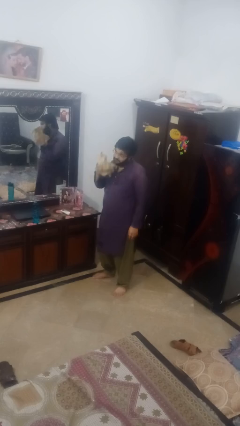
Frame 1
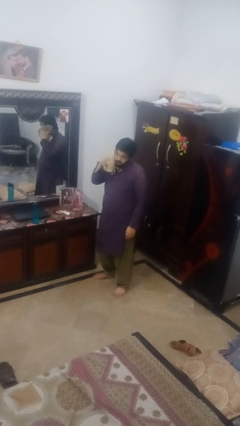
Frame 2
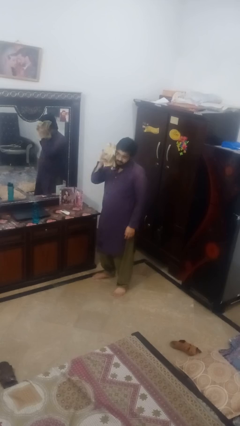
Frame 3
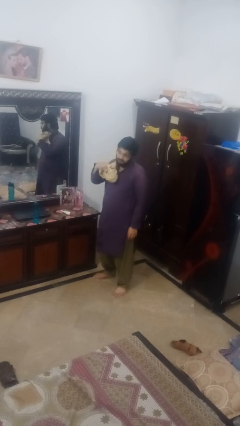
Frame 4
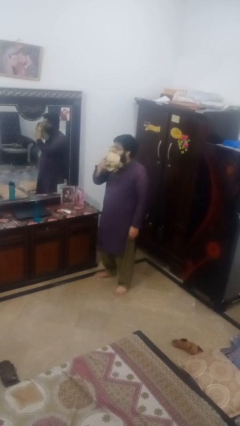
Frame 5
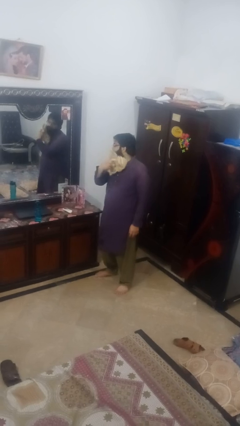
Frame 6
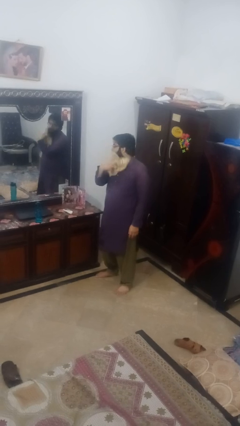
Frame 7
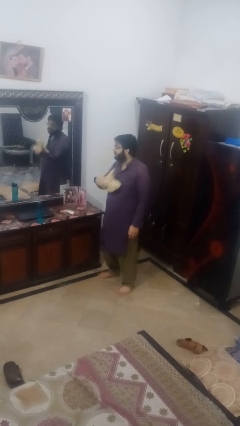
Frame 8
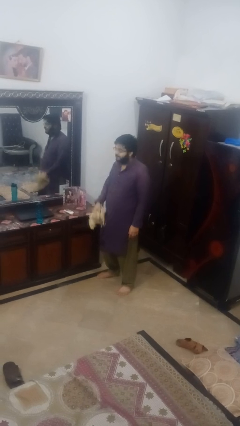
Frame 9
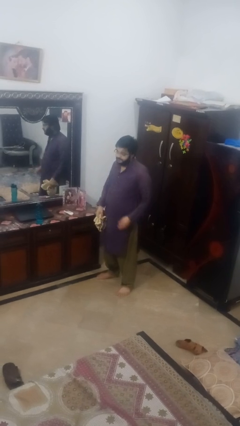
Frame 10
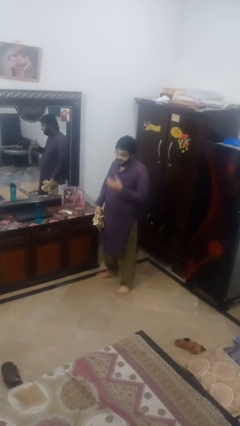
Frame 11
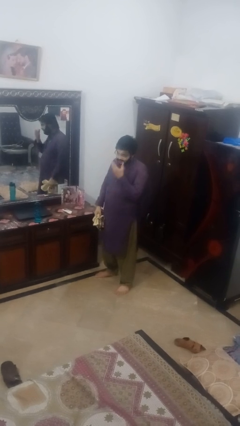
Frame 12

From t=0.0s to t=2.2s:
person wipes mouth with napkin

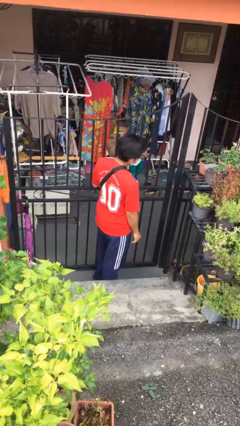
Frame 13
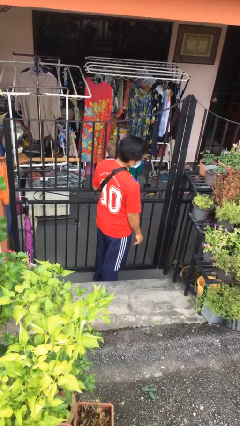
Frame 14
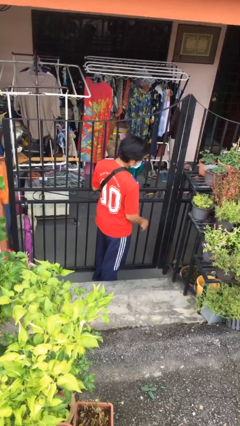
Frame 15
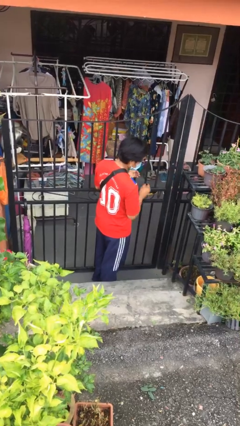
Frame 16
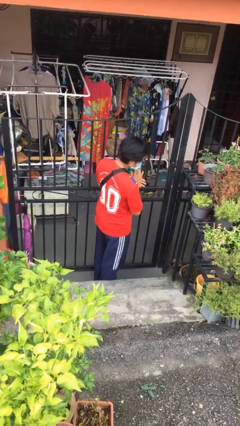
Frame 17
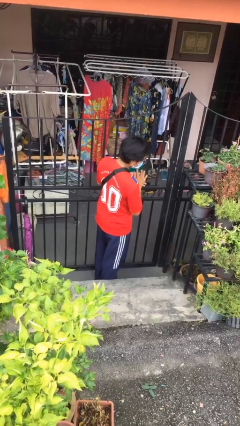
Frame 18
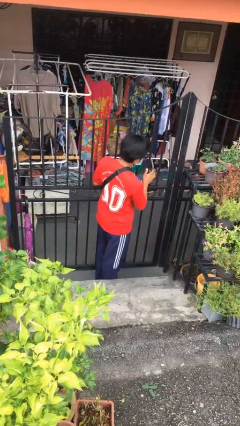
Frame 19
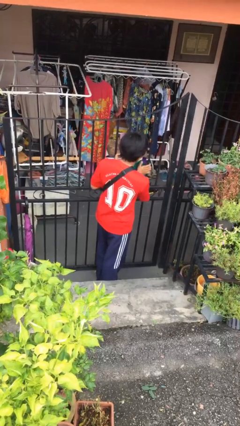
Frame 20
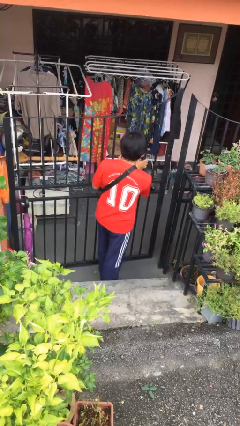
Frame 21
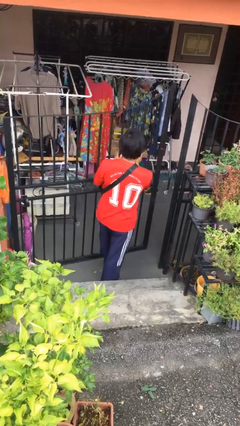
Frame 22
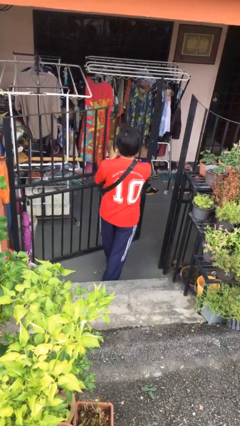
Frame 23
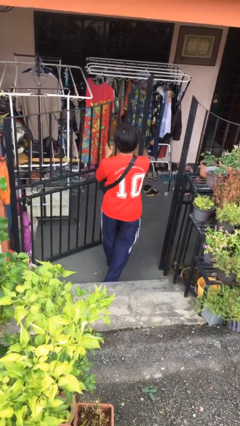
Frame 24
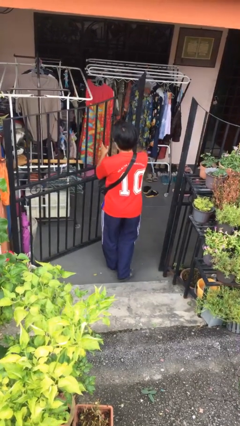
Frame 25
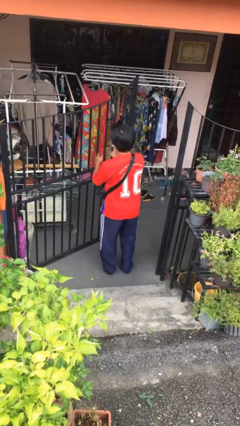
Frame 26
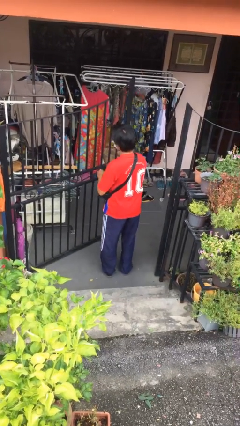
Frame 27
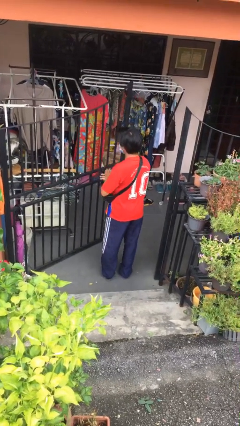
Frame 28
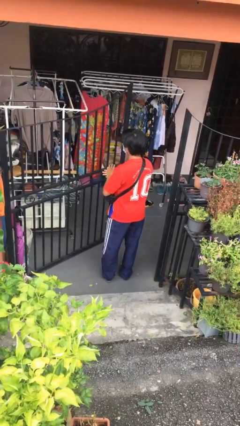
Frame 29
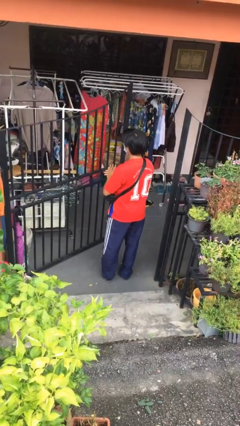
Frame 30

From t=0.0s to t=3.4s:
person opens facility door

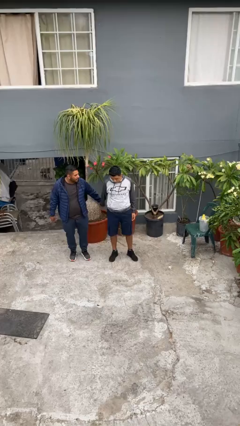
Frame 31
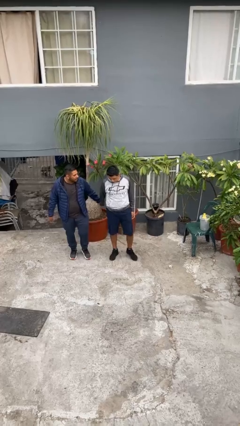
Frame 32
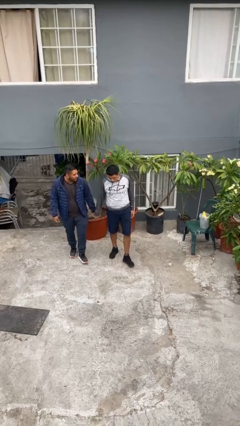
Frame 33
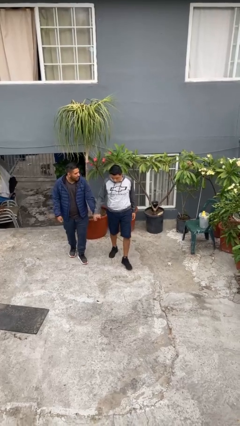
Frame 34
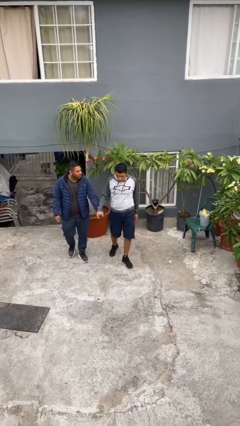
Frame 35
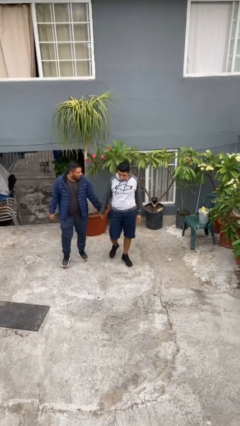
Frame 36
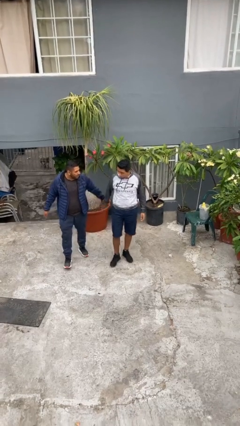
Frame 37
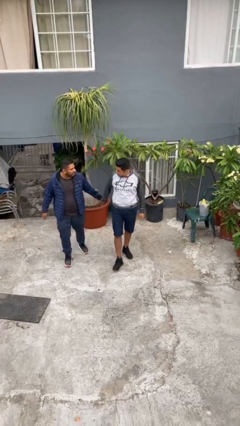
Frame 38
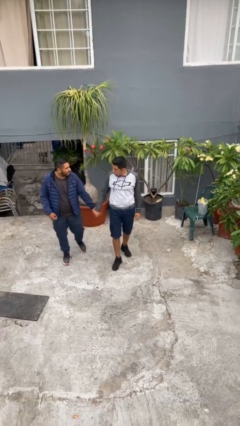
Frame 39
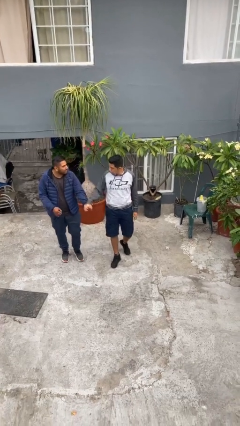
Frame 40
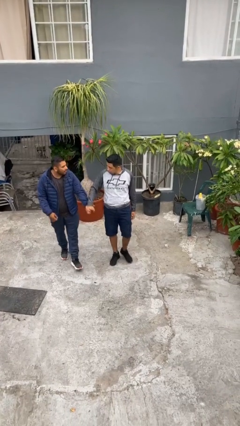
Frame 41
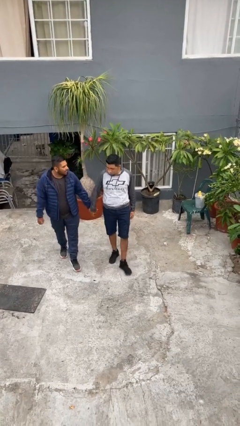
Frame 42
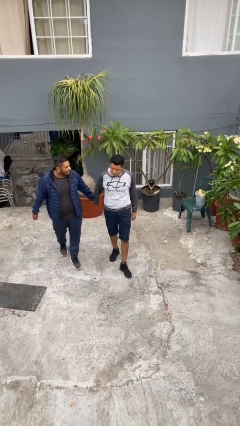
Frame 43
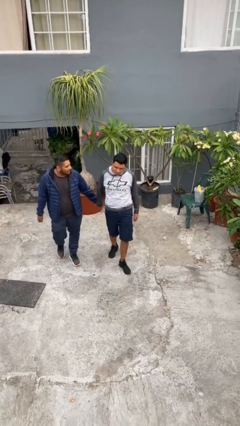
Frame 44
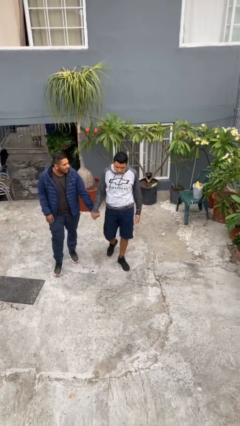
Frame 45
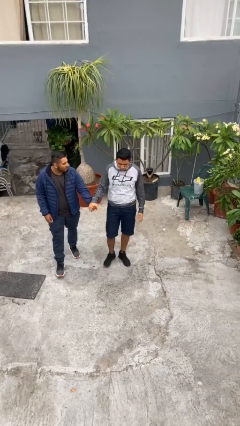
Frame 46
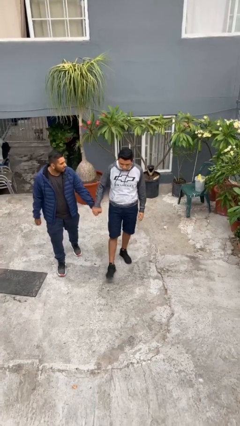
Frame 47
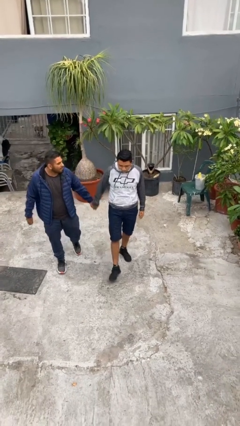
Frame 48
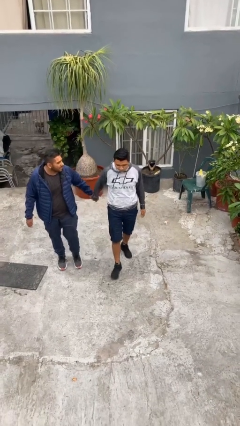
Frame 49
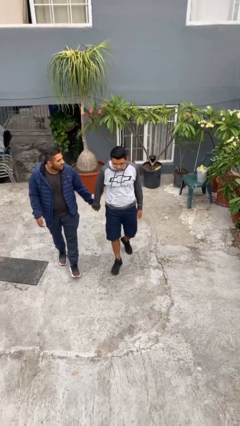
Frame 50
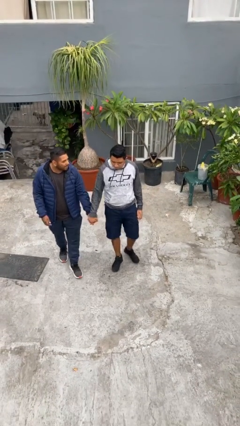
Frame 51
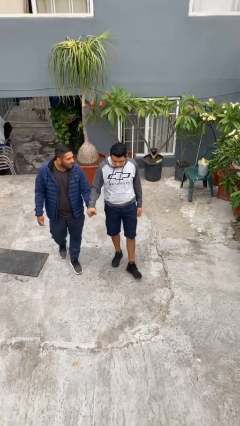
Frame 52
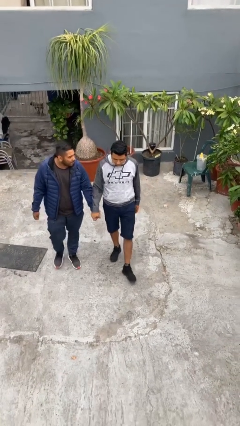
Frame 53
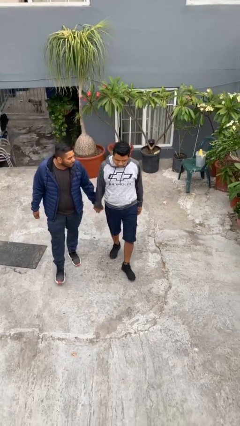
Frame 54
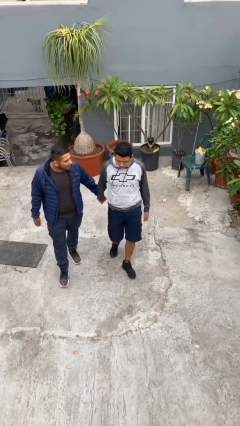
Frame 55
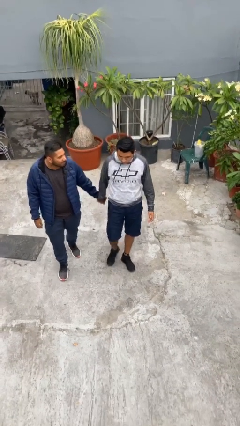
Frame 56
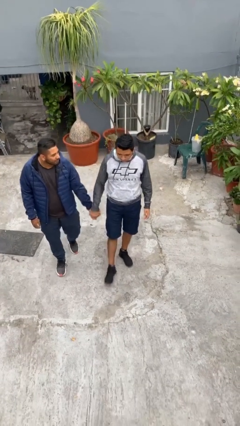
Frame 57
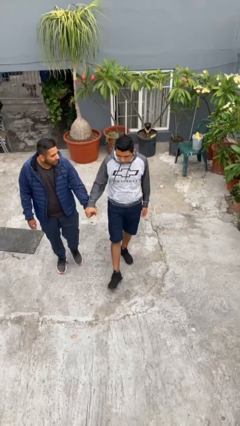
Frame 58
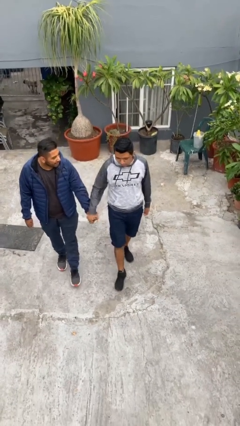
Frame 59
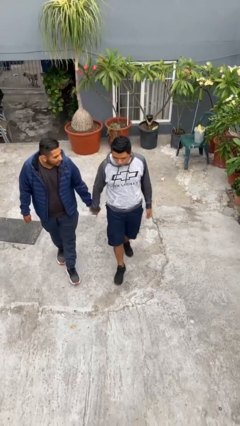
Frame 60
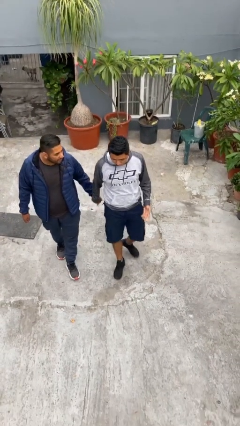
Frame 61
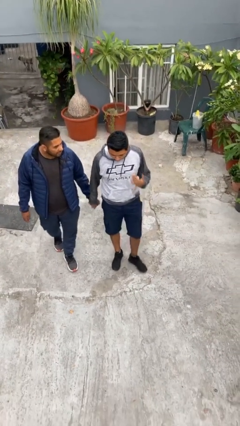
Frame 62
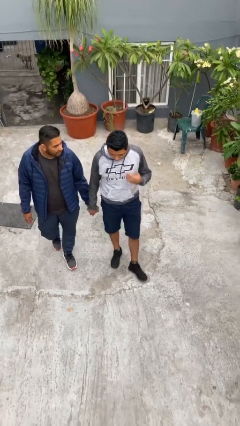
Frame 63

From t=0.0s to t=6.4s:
person holds hand

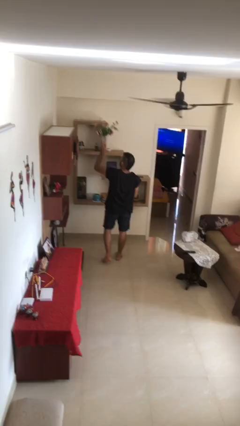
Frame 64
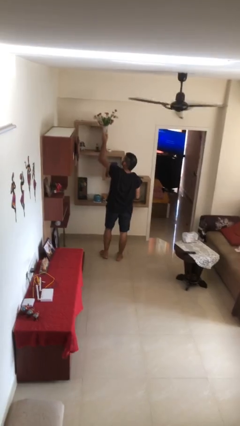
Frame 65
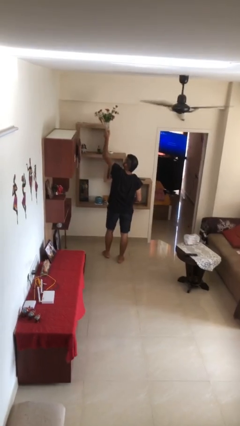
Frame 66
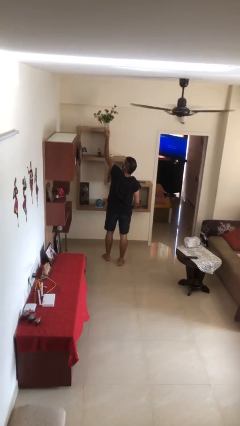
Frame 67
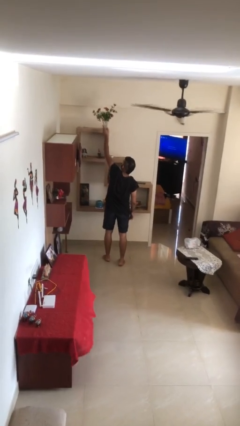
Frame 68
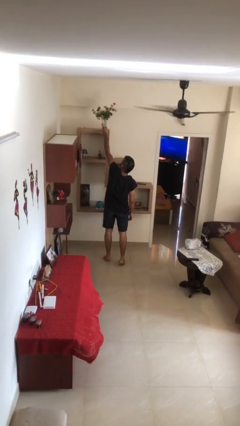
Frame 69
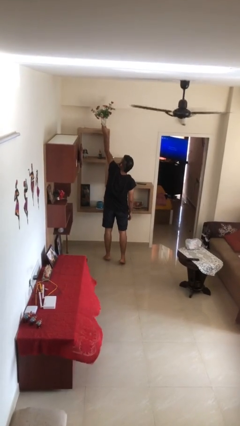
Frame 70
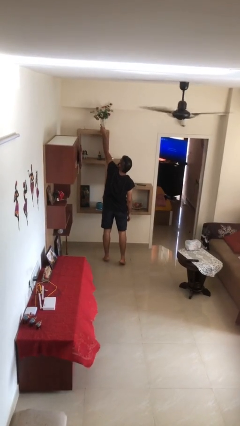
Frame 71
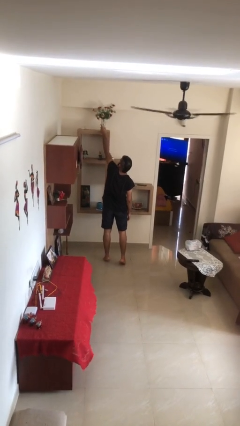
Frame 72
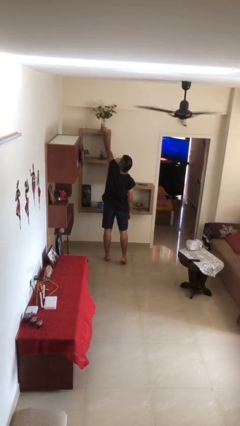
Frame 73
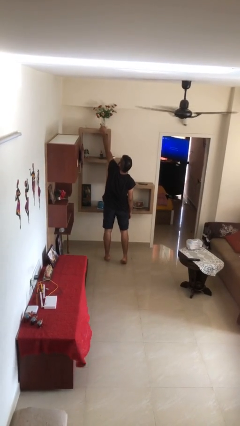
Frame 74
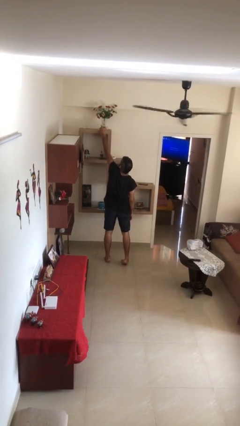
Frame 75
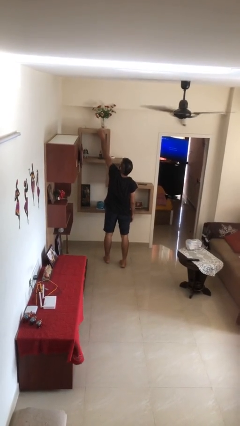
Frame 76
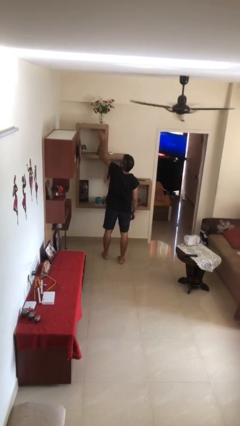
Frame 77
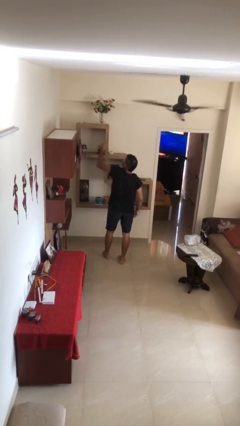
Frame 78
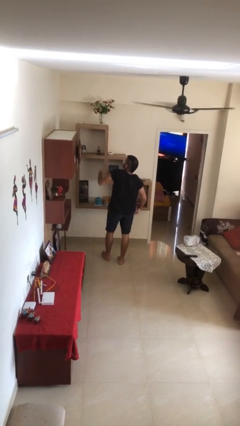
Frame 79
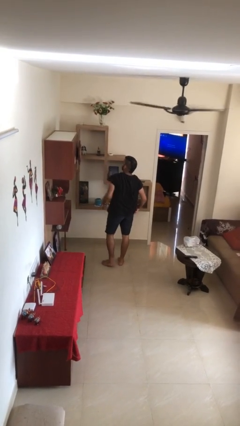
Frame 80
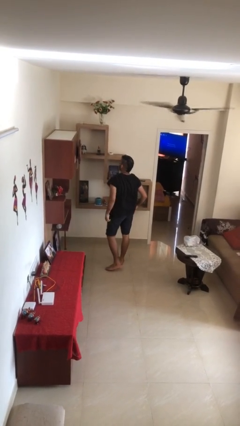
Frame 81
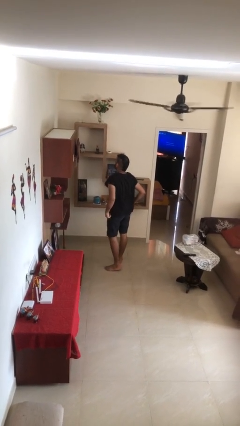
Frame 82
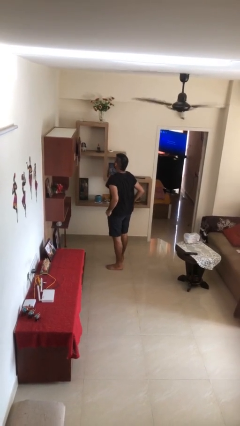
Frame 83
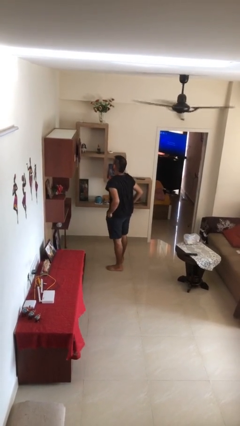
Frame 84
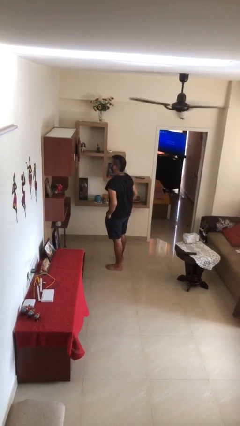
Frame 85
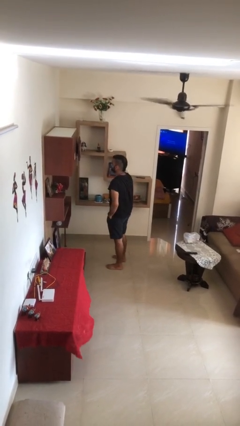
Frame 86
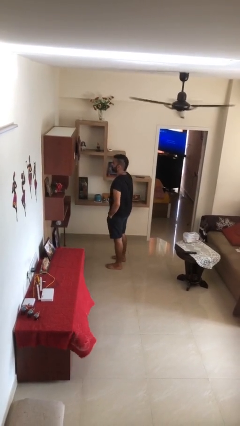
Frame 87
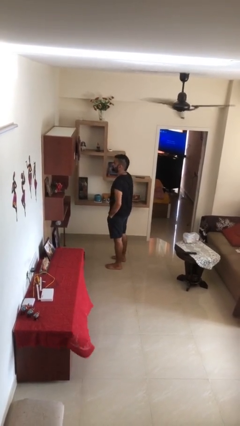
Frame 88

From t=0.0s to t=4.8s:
person puts down object on shelf

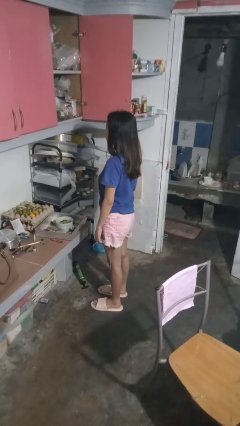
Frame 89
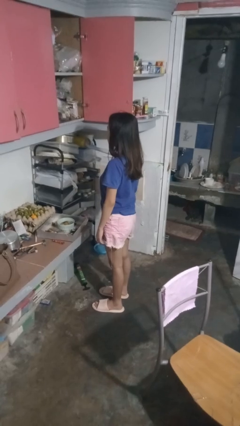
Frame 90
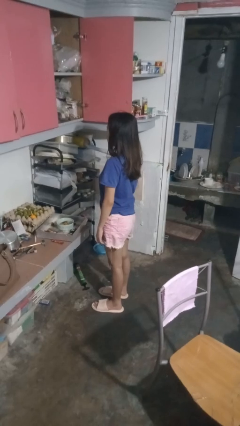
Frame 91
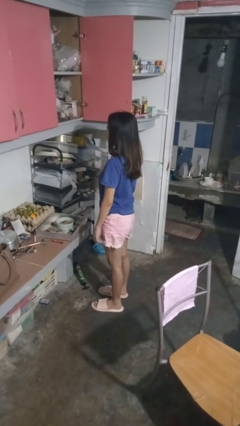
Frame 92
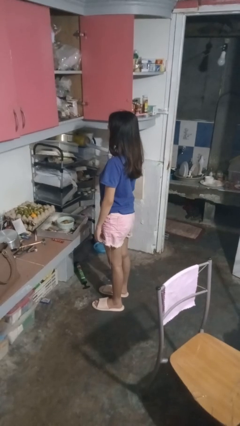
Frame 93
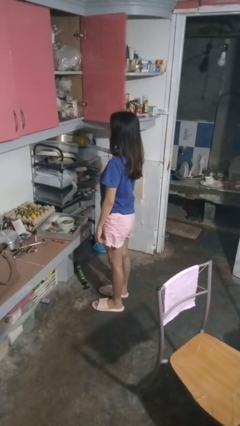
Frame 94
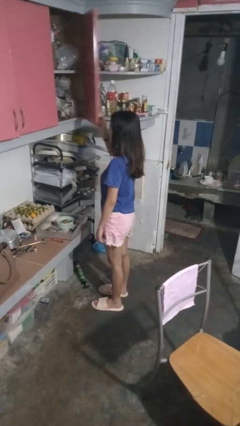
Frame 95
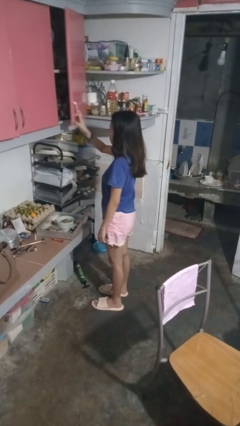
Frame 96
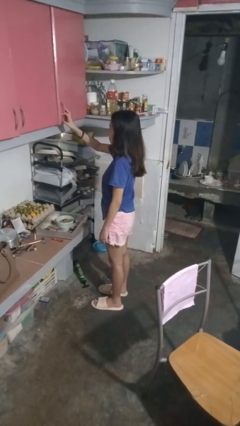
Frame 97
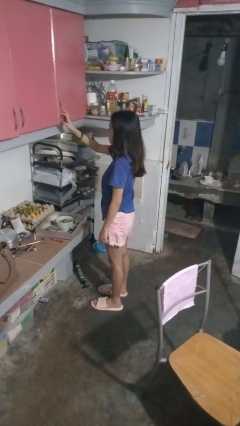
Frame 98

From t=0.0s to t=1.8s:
person closes cabinet
